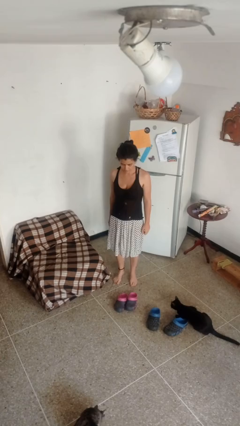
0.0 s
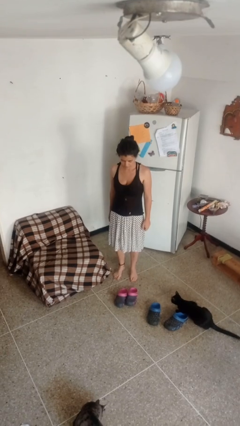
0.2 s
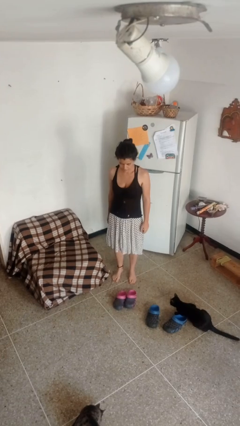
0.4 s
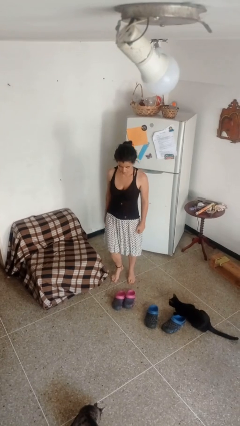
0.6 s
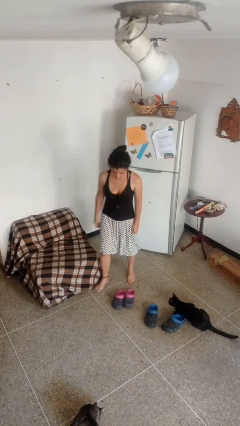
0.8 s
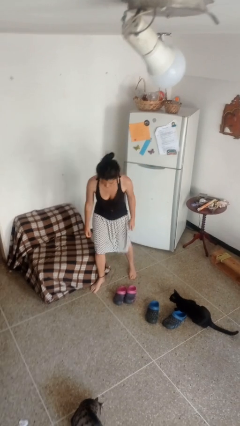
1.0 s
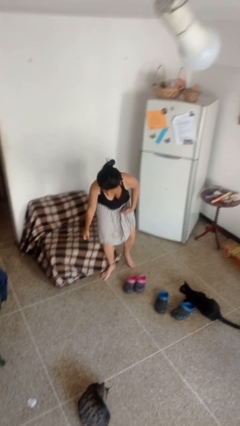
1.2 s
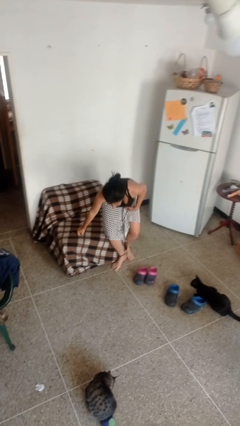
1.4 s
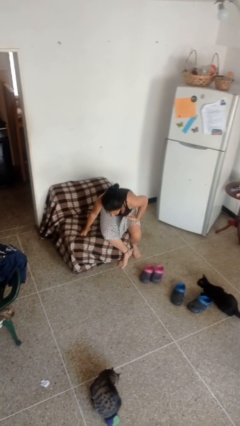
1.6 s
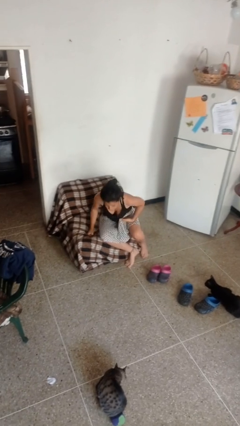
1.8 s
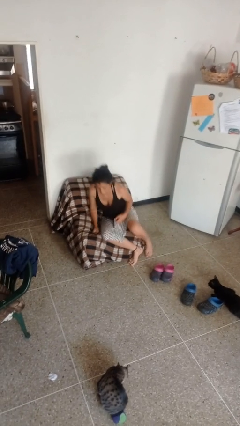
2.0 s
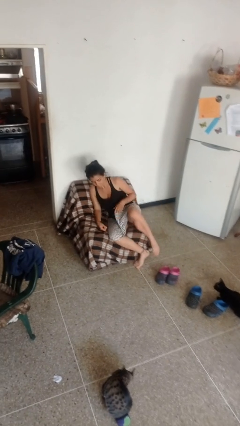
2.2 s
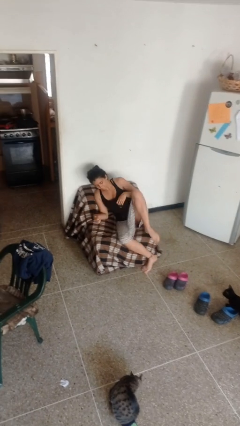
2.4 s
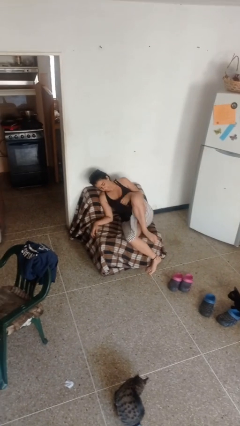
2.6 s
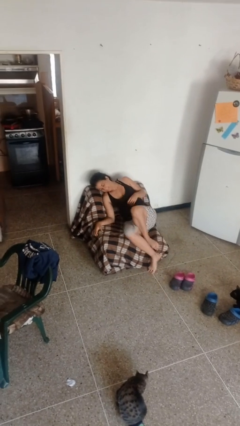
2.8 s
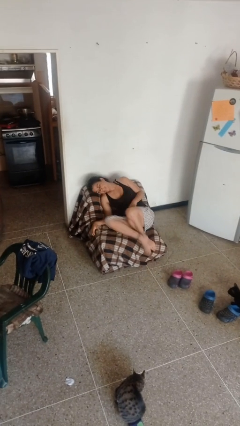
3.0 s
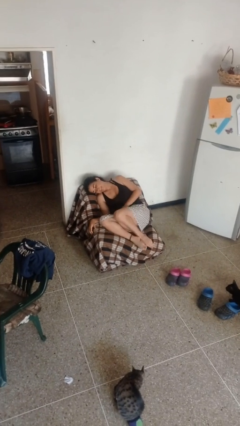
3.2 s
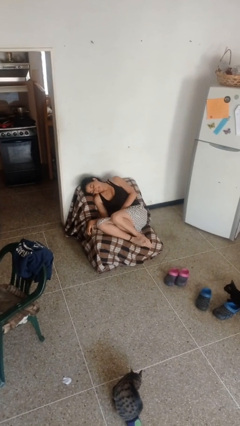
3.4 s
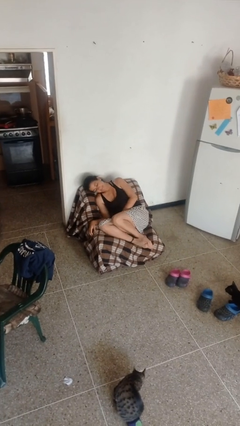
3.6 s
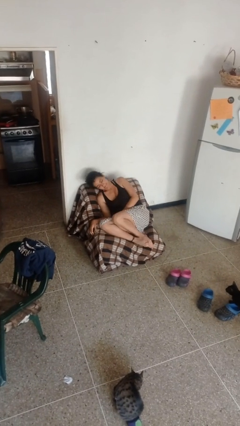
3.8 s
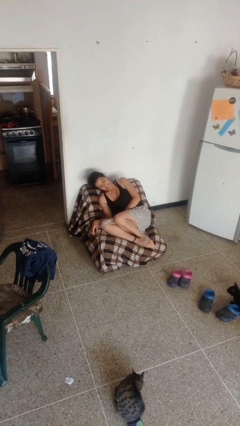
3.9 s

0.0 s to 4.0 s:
person lies down on couch

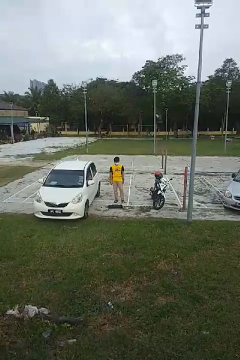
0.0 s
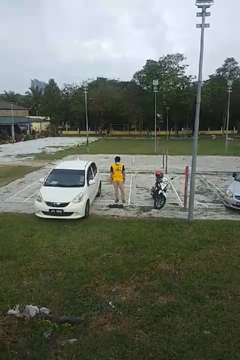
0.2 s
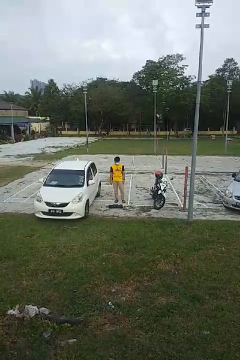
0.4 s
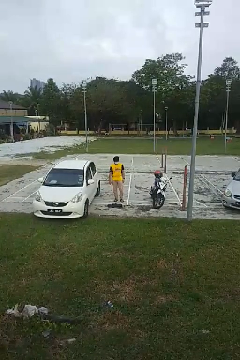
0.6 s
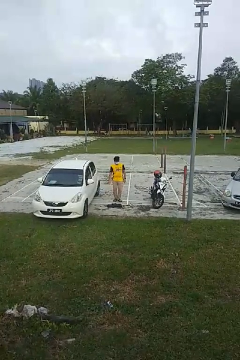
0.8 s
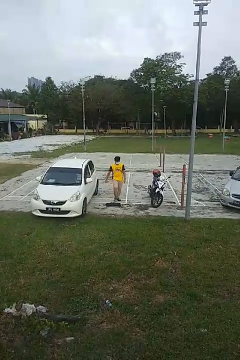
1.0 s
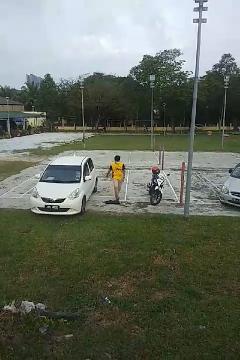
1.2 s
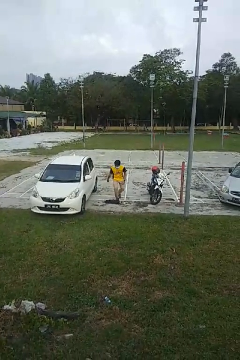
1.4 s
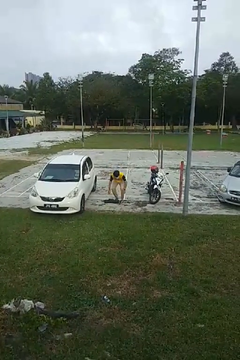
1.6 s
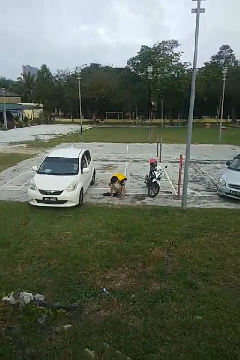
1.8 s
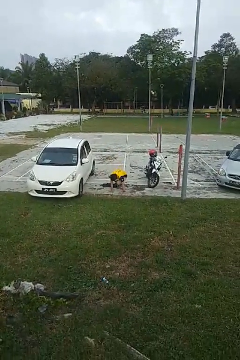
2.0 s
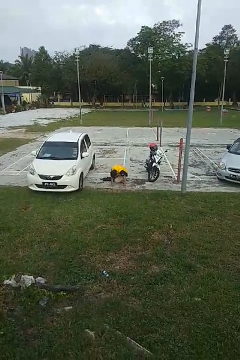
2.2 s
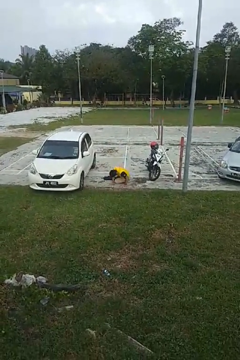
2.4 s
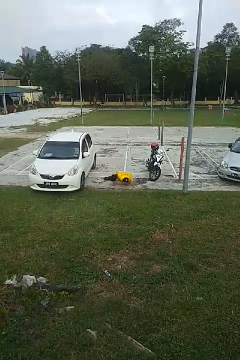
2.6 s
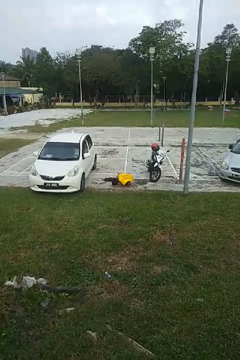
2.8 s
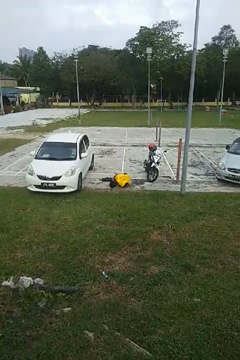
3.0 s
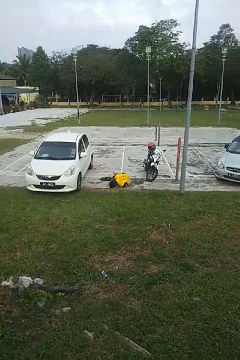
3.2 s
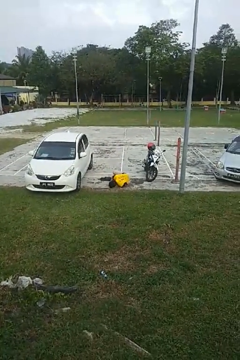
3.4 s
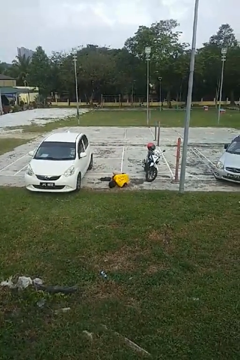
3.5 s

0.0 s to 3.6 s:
person trips on object on floor

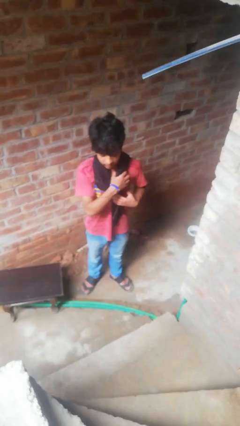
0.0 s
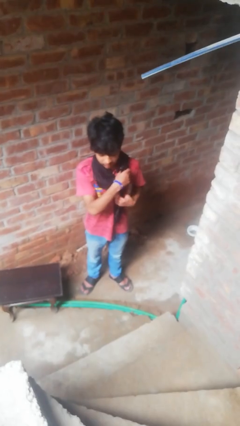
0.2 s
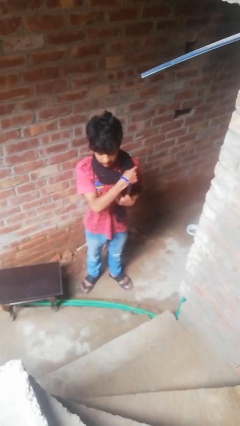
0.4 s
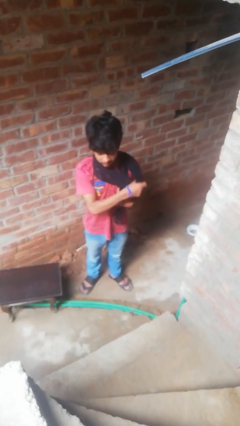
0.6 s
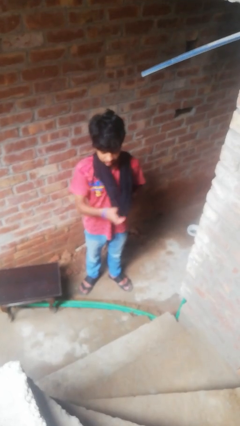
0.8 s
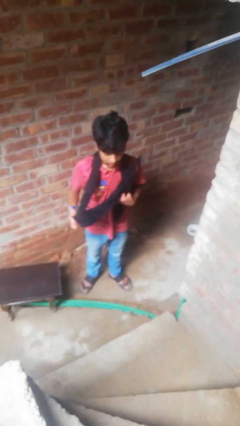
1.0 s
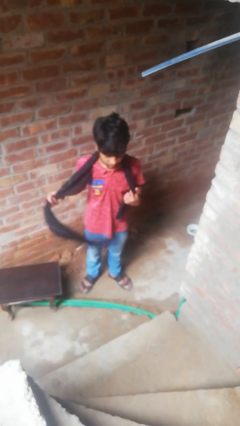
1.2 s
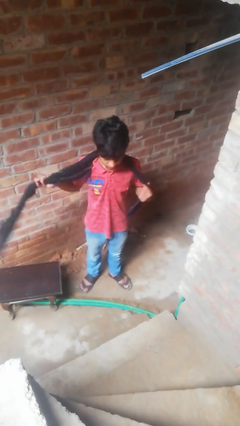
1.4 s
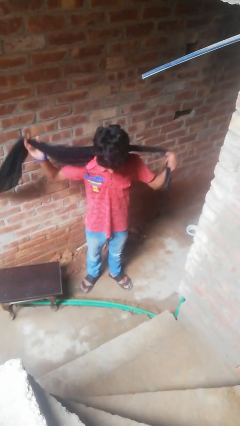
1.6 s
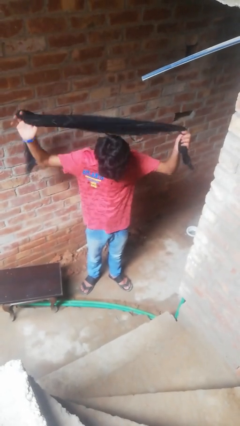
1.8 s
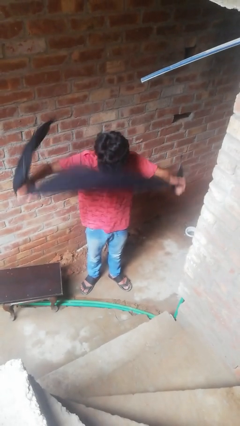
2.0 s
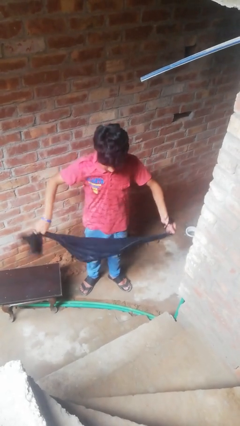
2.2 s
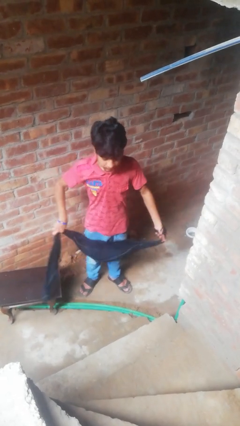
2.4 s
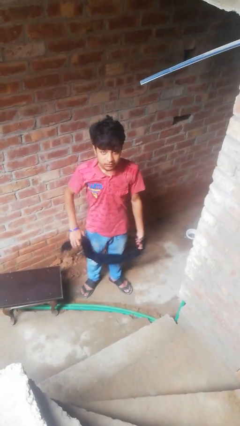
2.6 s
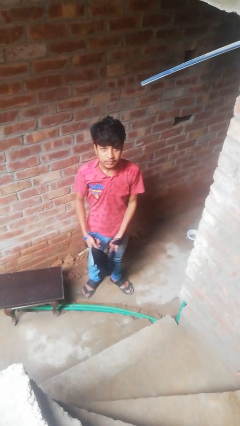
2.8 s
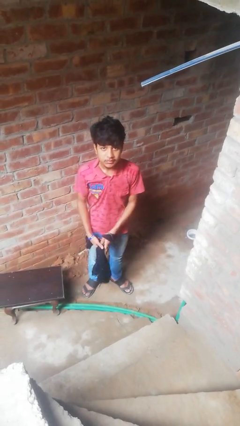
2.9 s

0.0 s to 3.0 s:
person takes off scarf

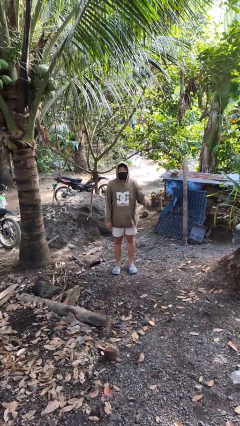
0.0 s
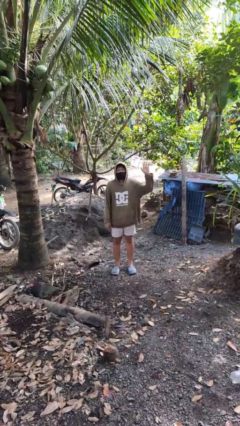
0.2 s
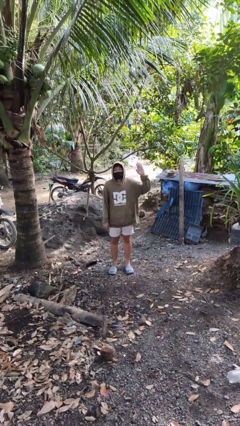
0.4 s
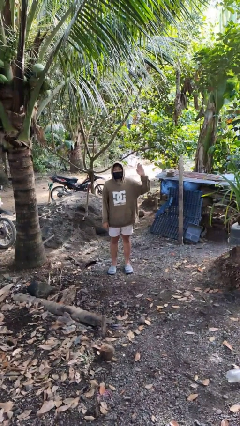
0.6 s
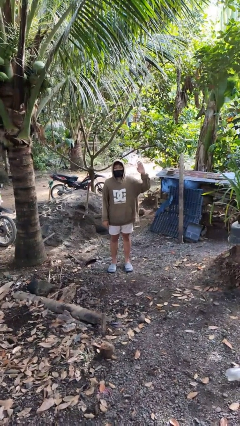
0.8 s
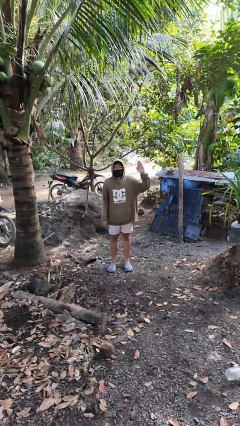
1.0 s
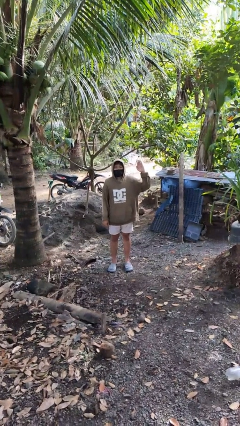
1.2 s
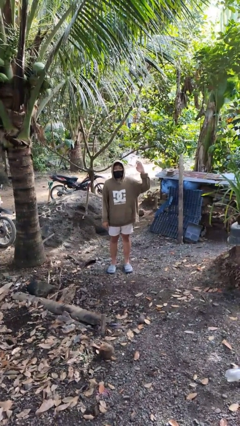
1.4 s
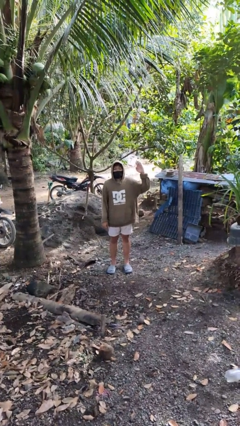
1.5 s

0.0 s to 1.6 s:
person gestures number five

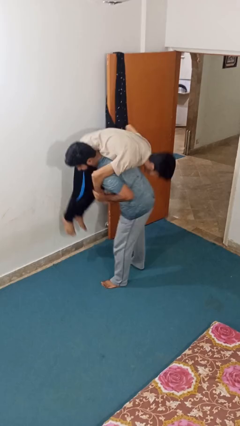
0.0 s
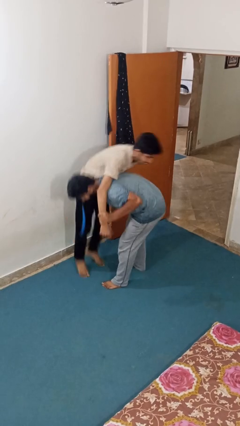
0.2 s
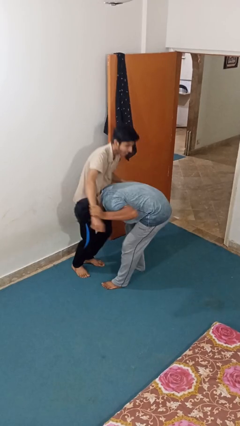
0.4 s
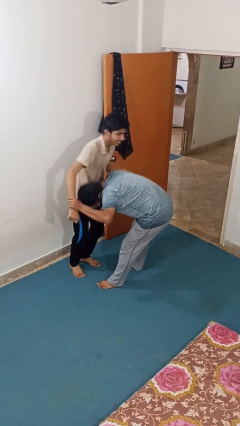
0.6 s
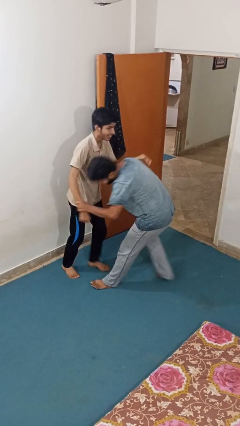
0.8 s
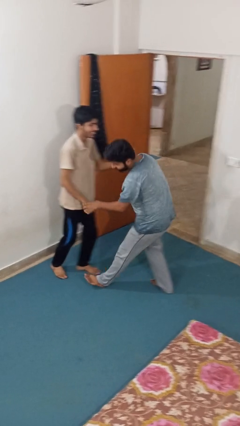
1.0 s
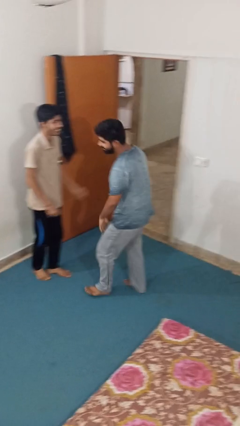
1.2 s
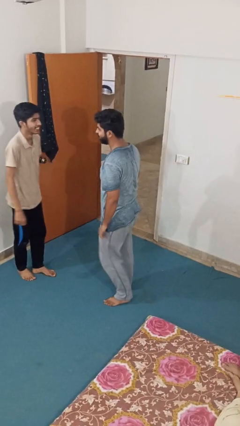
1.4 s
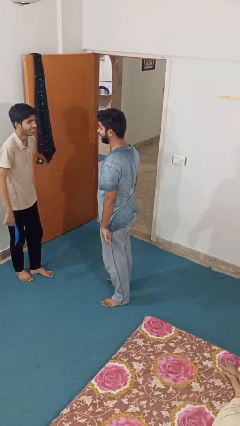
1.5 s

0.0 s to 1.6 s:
person puts down person

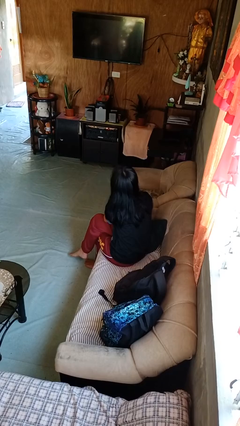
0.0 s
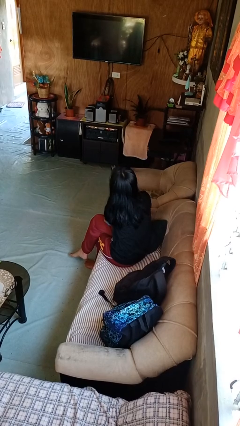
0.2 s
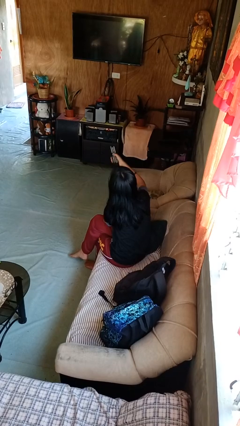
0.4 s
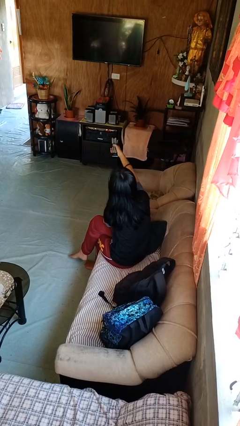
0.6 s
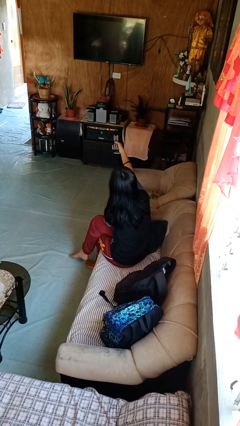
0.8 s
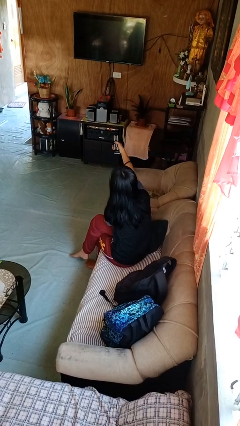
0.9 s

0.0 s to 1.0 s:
person uses television remote

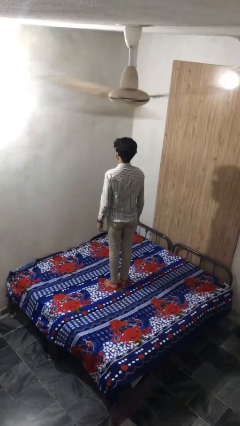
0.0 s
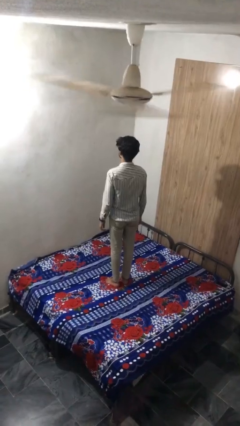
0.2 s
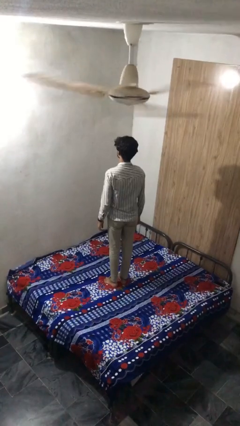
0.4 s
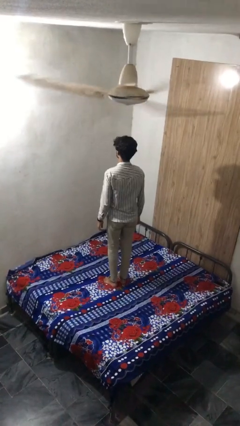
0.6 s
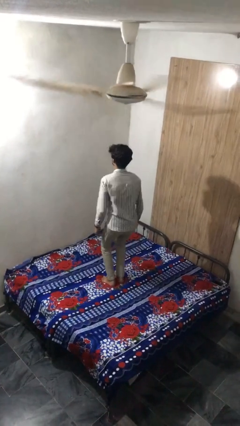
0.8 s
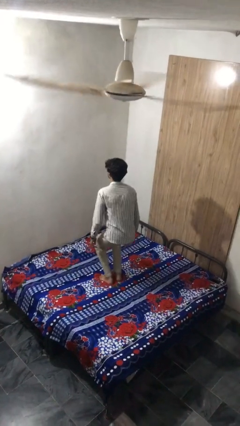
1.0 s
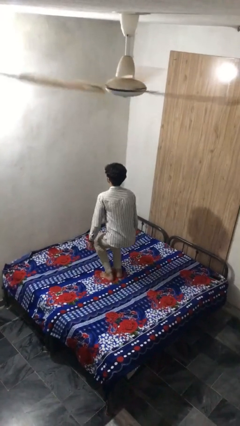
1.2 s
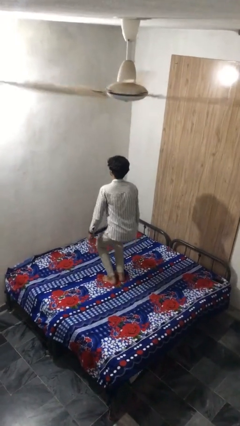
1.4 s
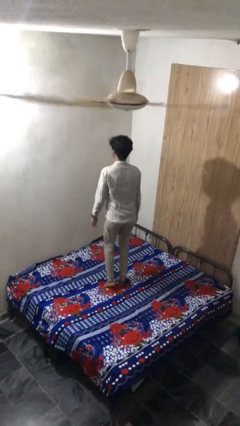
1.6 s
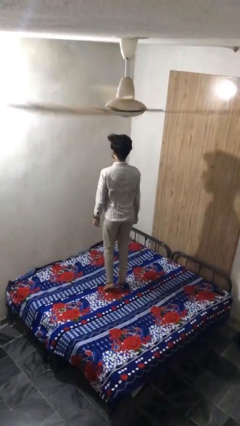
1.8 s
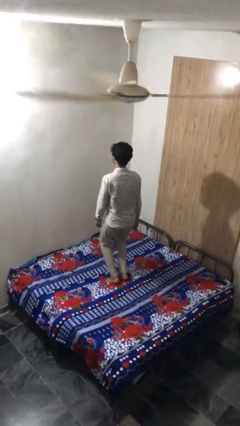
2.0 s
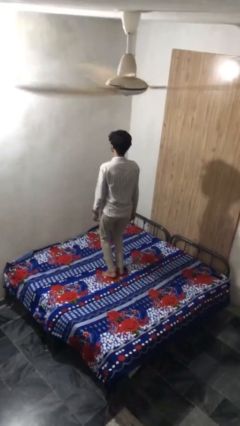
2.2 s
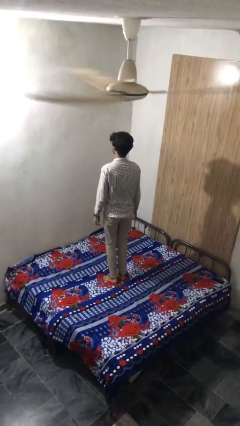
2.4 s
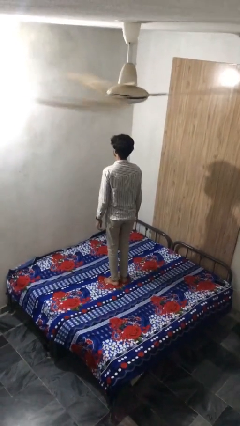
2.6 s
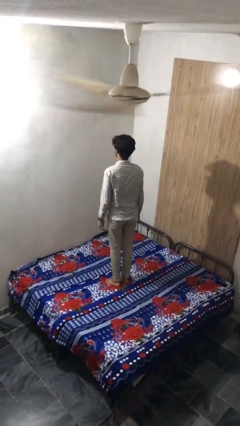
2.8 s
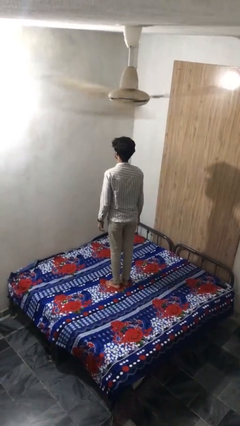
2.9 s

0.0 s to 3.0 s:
person jumps on bed

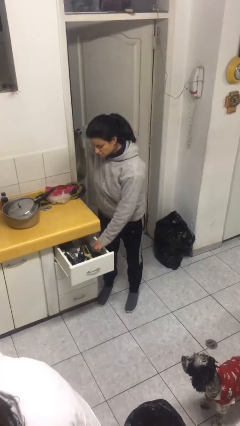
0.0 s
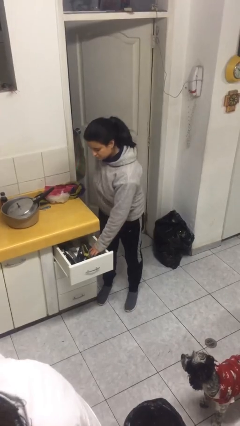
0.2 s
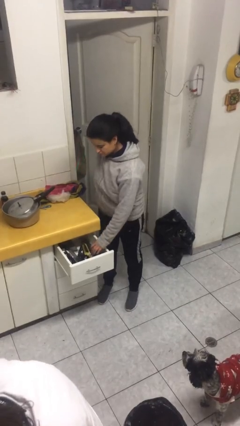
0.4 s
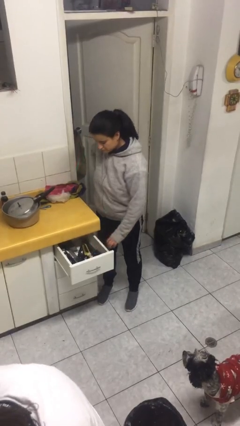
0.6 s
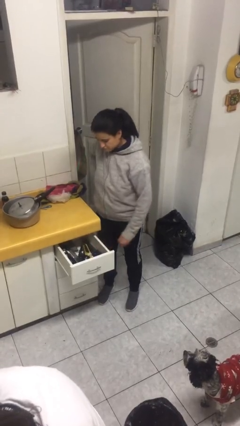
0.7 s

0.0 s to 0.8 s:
person puts object into kitchen drawer
